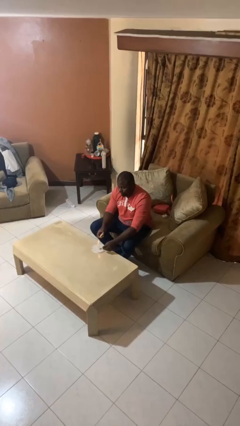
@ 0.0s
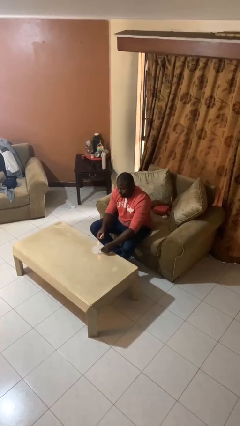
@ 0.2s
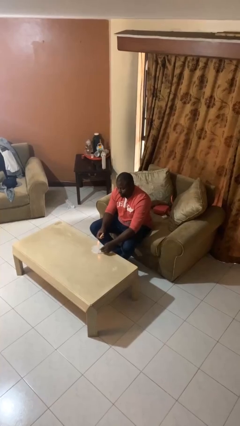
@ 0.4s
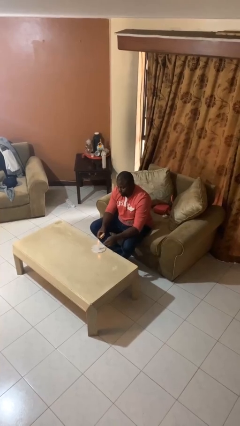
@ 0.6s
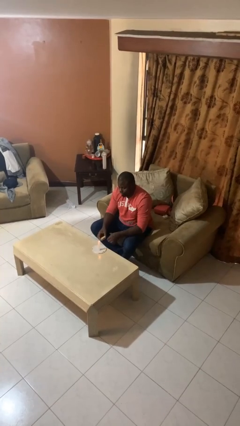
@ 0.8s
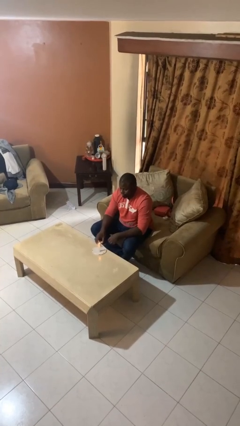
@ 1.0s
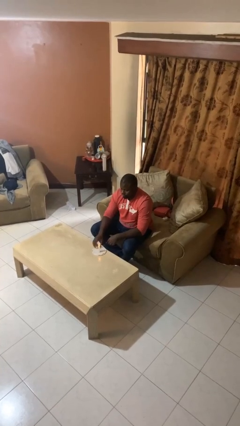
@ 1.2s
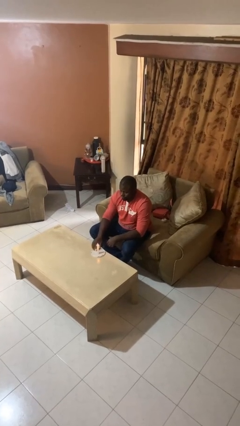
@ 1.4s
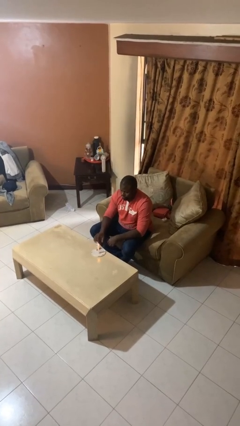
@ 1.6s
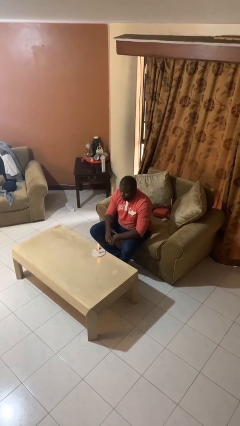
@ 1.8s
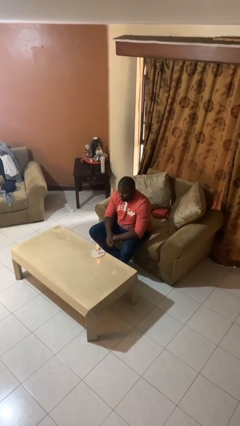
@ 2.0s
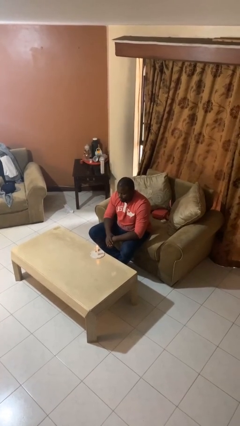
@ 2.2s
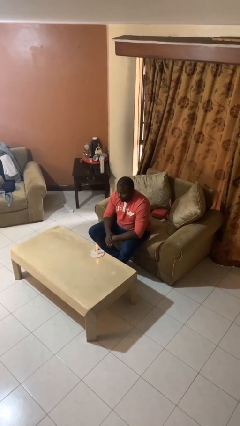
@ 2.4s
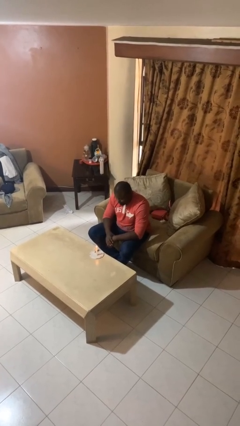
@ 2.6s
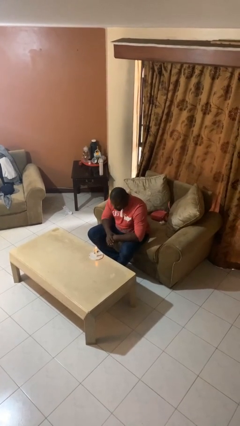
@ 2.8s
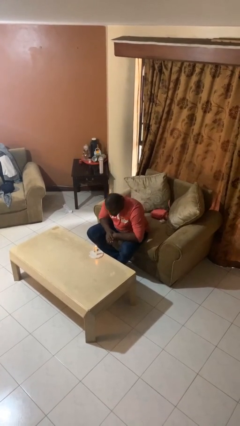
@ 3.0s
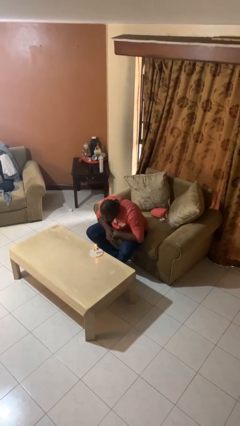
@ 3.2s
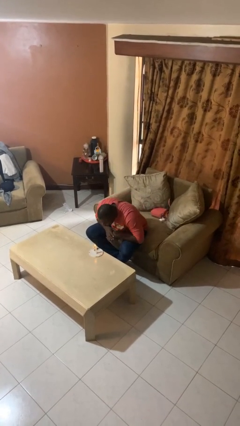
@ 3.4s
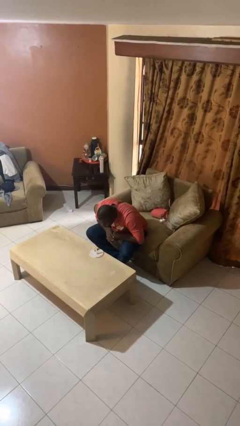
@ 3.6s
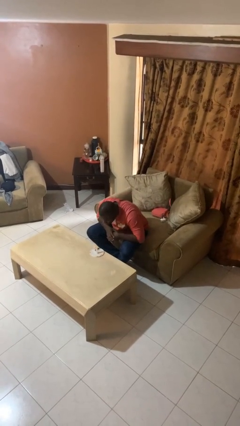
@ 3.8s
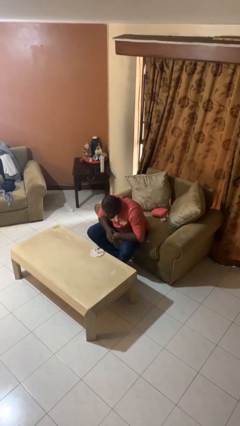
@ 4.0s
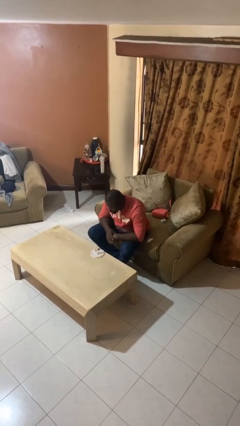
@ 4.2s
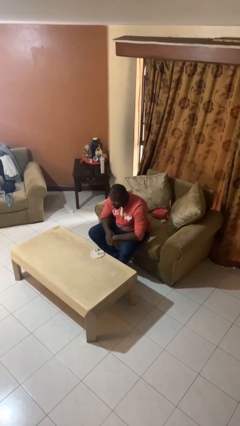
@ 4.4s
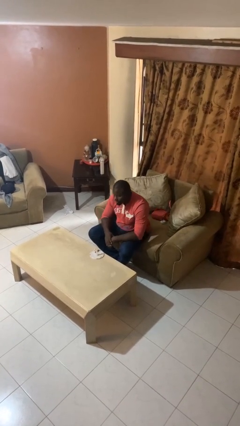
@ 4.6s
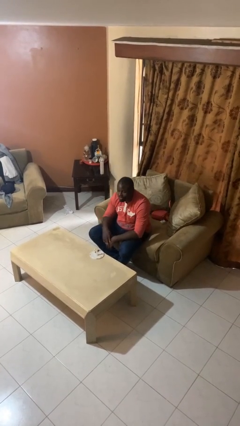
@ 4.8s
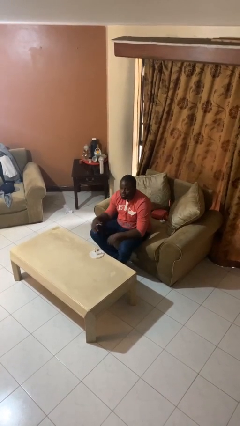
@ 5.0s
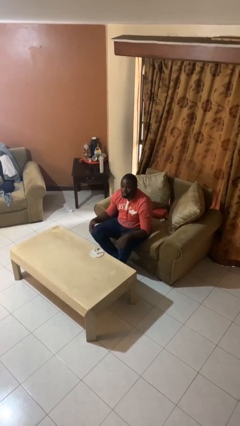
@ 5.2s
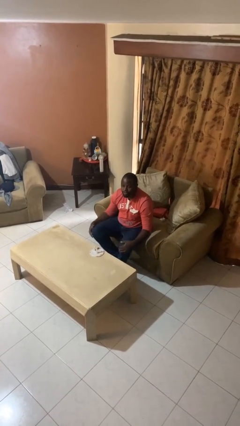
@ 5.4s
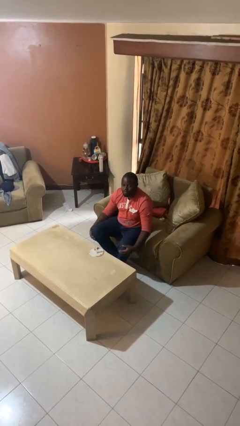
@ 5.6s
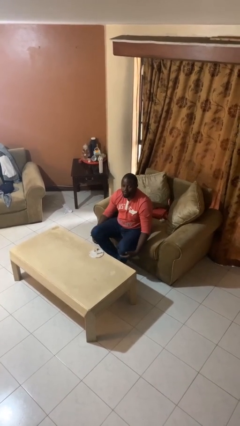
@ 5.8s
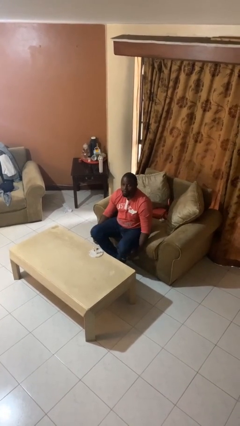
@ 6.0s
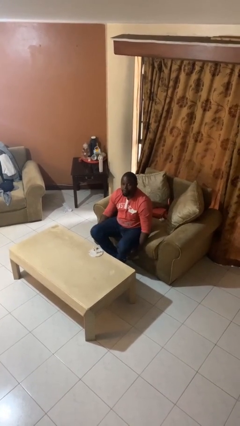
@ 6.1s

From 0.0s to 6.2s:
person extinguishes candle

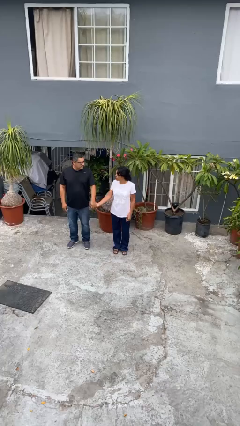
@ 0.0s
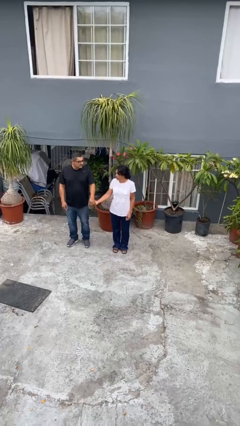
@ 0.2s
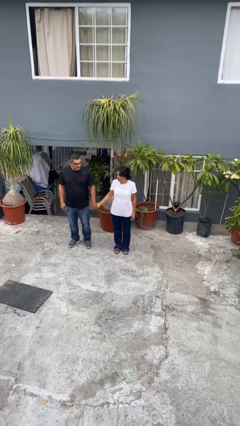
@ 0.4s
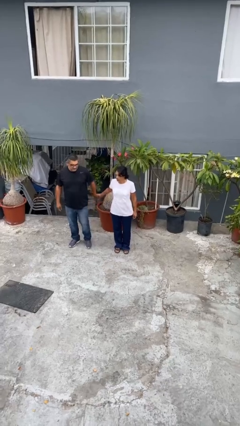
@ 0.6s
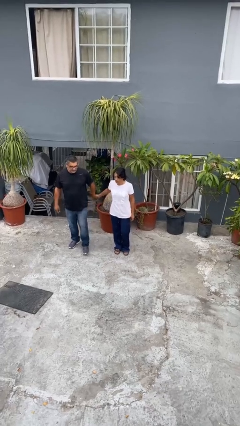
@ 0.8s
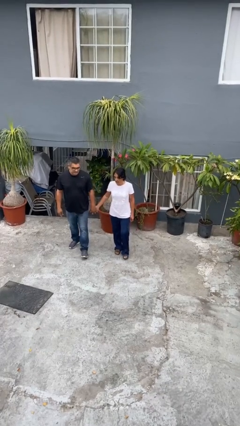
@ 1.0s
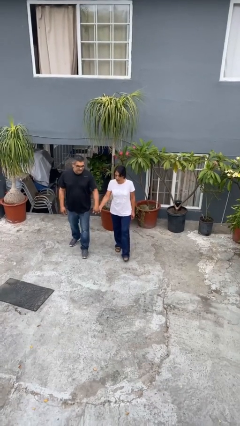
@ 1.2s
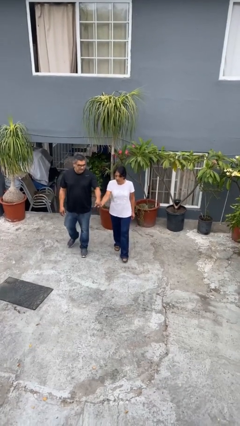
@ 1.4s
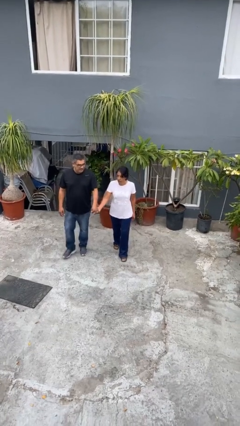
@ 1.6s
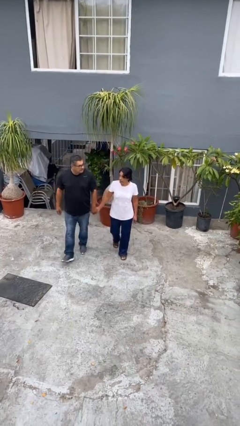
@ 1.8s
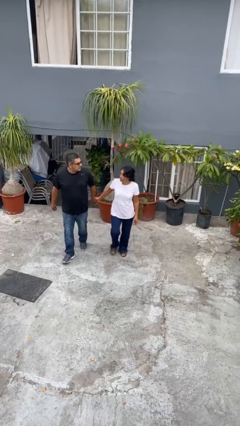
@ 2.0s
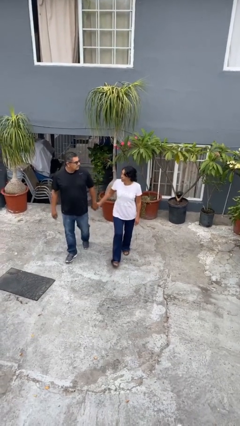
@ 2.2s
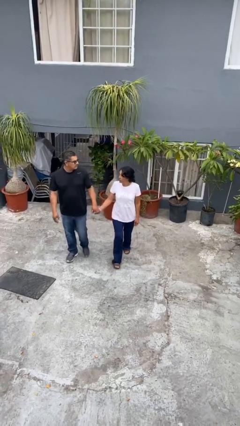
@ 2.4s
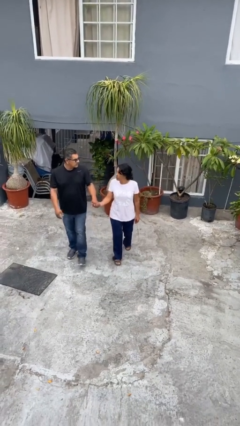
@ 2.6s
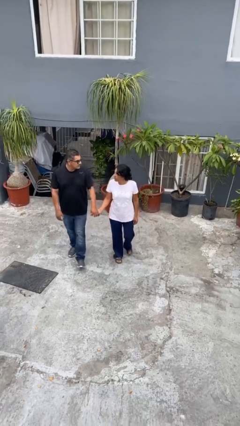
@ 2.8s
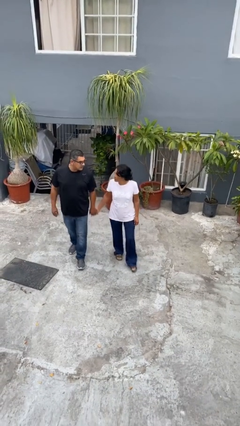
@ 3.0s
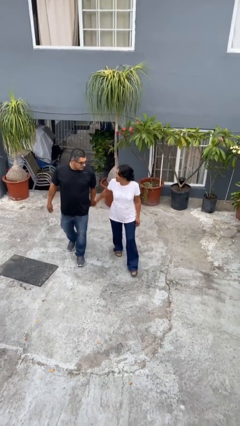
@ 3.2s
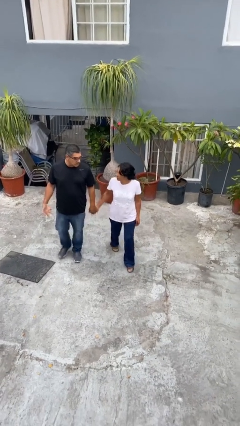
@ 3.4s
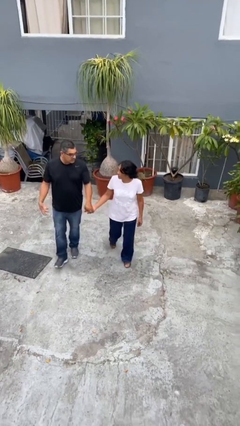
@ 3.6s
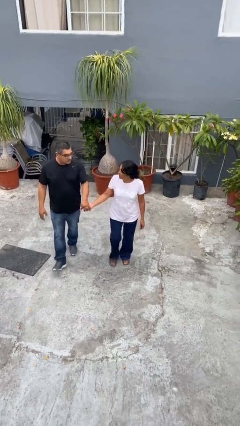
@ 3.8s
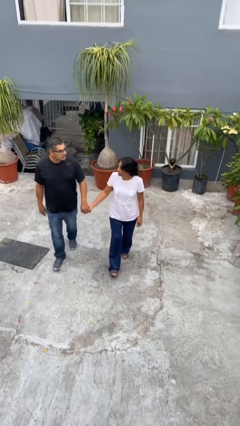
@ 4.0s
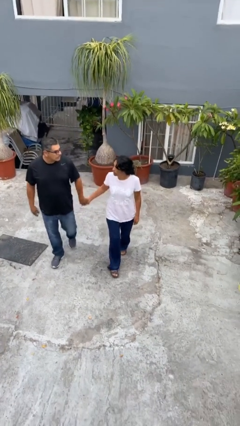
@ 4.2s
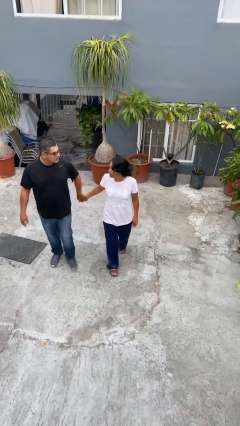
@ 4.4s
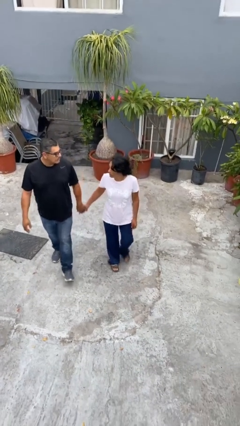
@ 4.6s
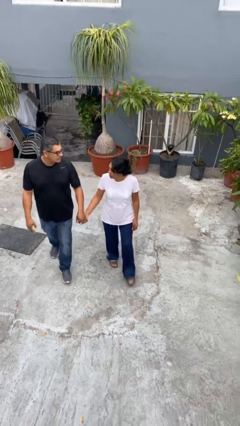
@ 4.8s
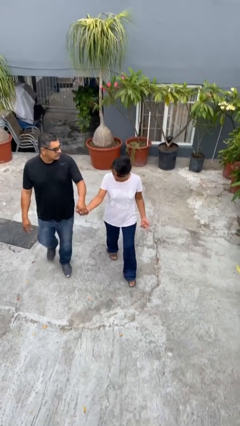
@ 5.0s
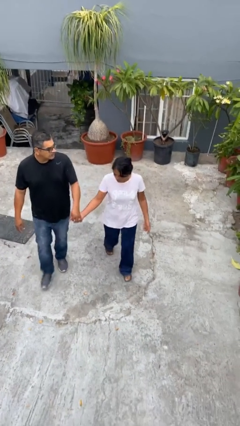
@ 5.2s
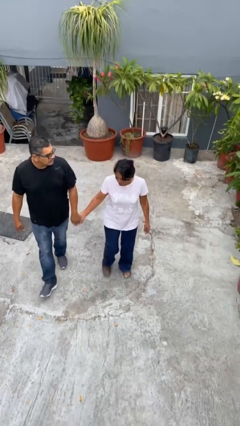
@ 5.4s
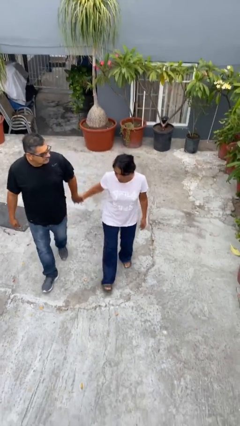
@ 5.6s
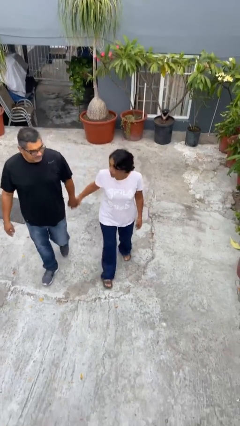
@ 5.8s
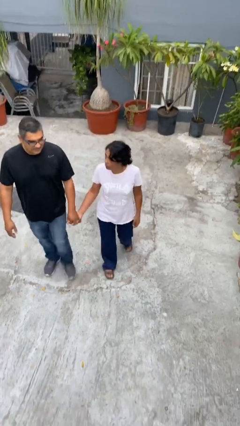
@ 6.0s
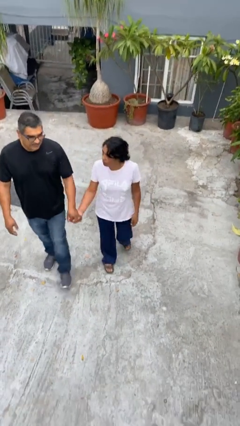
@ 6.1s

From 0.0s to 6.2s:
person holds hand

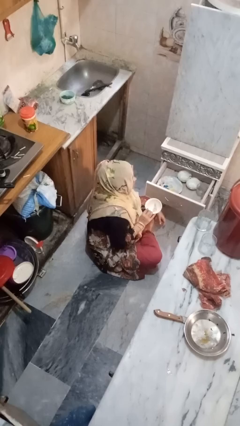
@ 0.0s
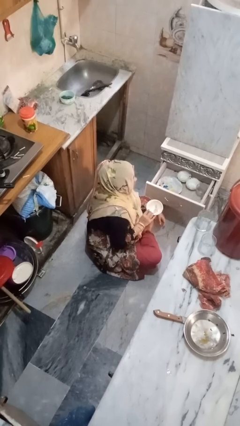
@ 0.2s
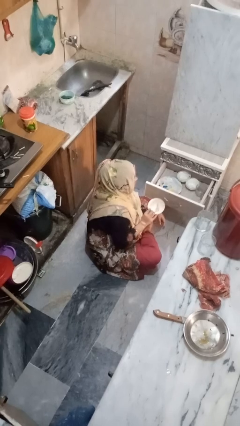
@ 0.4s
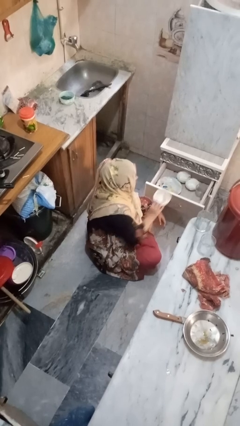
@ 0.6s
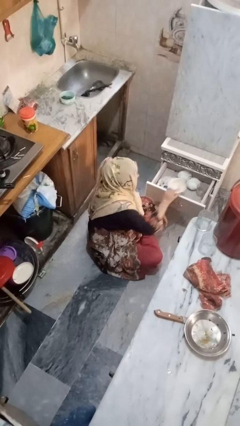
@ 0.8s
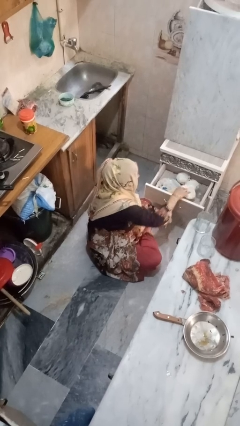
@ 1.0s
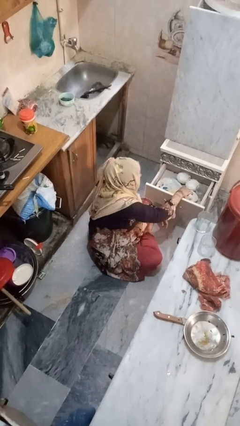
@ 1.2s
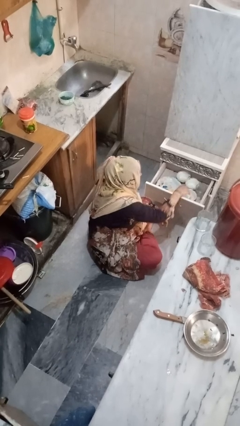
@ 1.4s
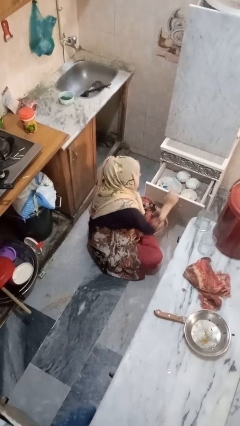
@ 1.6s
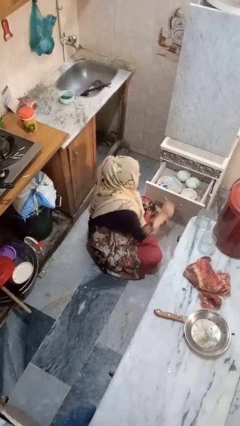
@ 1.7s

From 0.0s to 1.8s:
person puts object into kitchen drawer

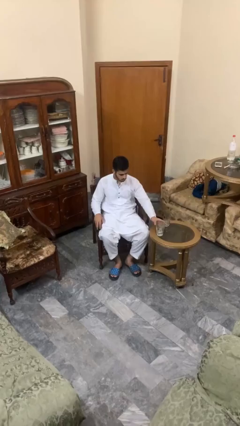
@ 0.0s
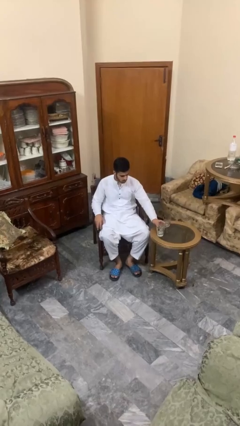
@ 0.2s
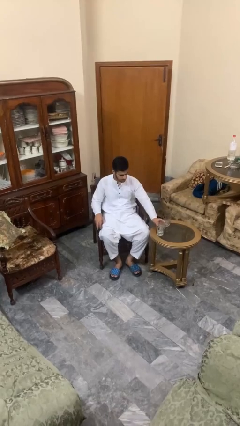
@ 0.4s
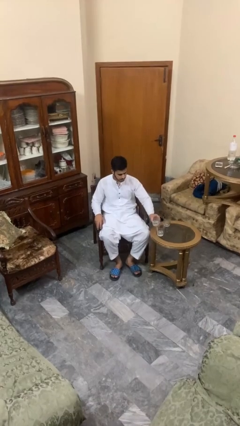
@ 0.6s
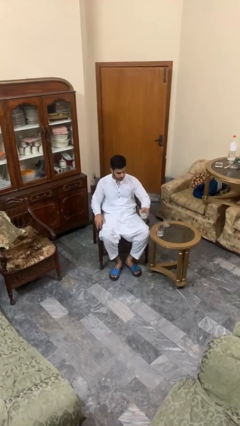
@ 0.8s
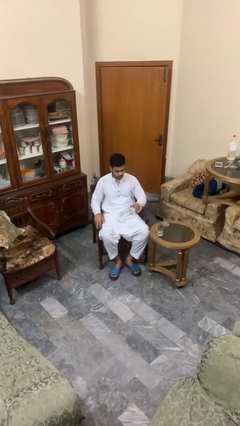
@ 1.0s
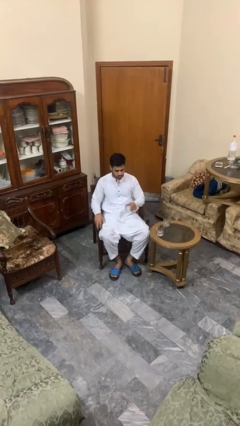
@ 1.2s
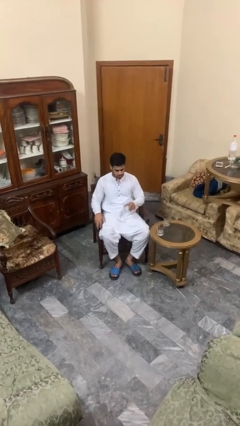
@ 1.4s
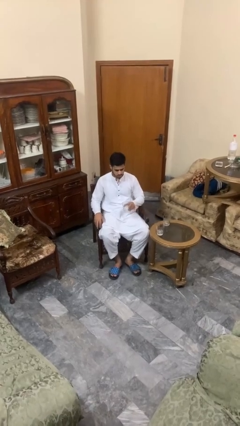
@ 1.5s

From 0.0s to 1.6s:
person picks up object from table

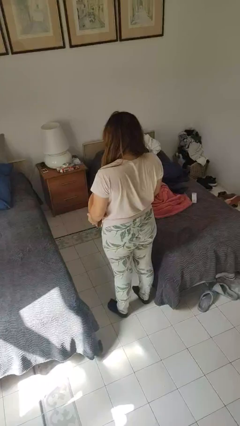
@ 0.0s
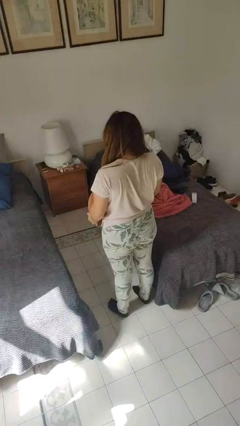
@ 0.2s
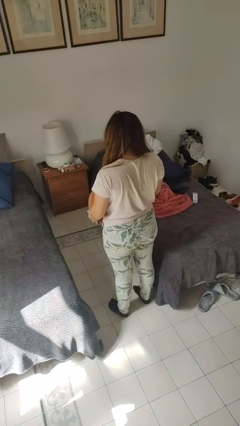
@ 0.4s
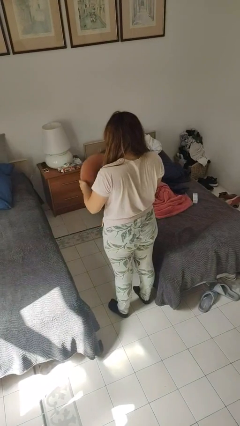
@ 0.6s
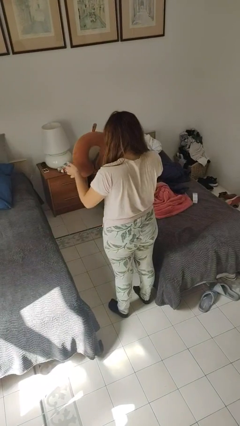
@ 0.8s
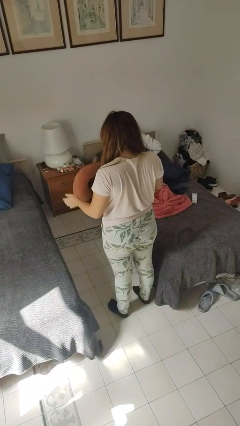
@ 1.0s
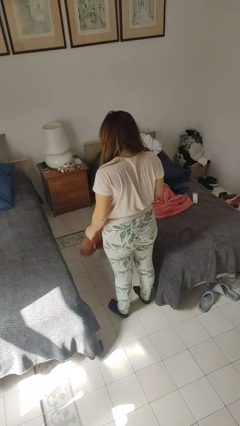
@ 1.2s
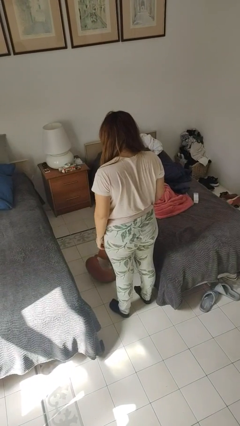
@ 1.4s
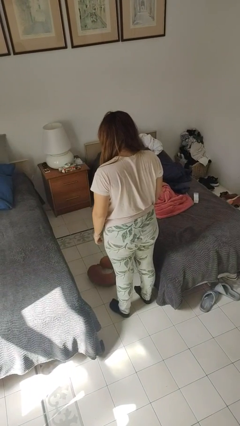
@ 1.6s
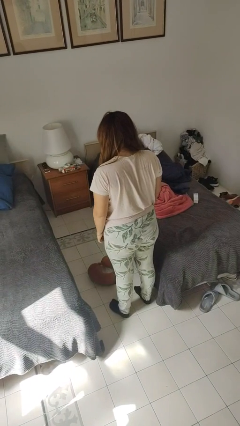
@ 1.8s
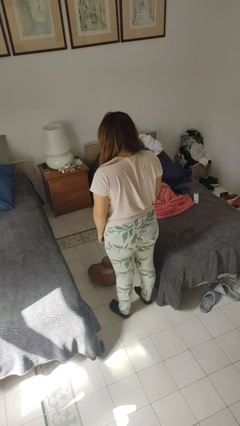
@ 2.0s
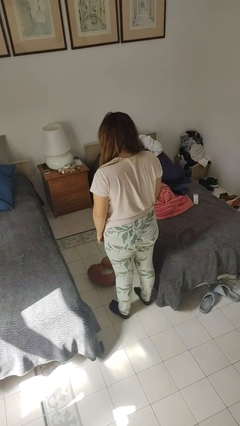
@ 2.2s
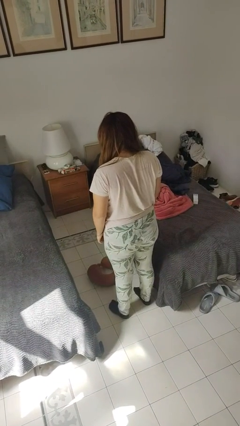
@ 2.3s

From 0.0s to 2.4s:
person throws object into air
